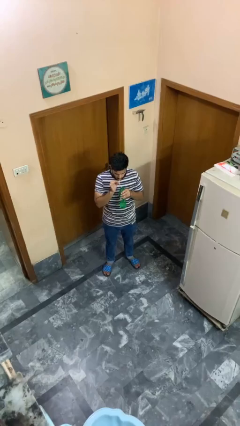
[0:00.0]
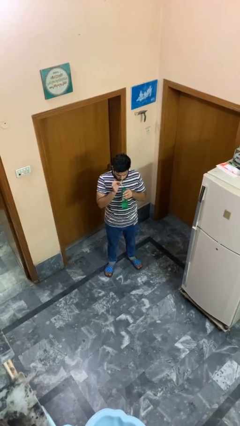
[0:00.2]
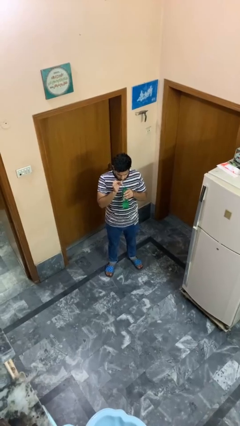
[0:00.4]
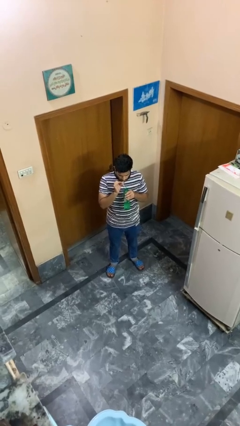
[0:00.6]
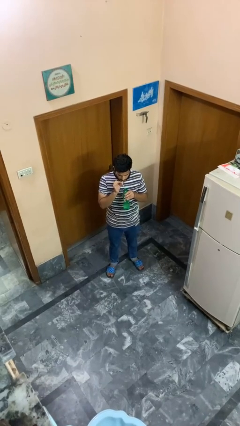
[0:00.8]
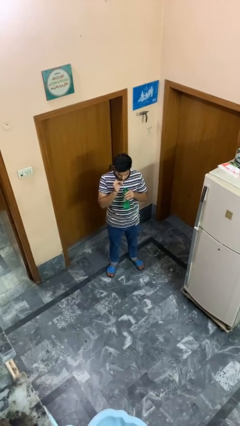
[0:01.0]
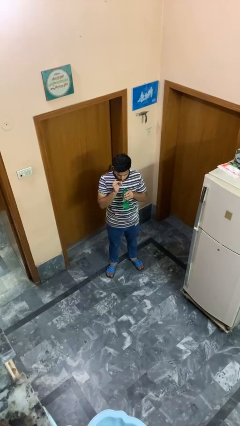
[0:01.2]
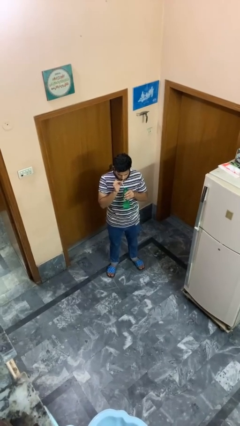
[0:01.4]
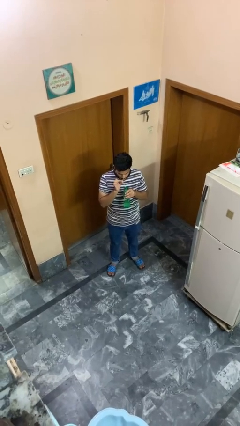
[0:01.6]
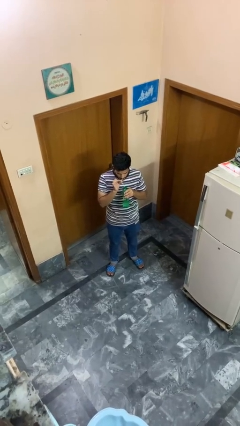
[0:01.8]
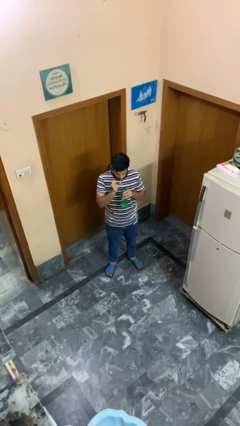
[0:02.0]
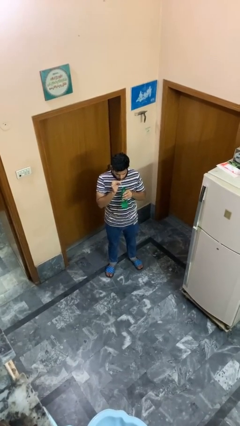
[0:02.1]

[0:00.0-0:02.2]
person drinks from straw

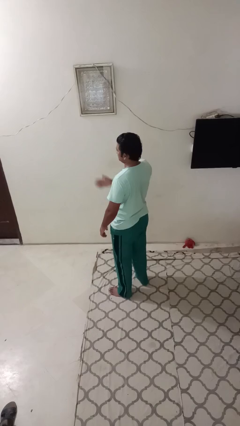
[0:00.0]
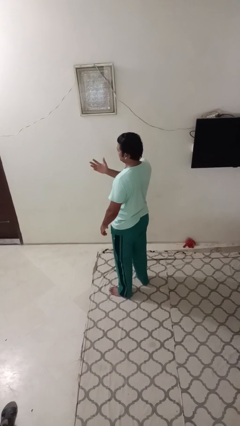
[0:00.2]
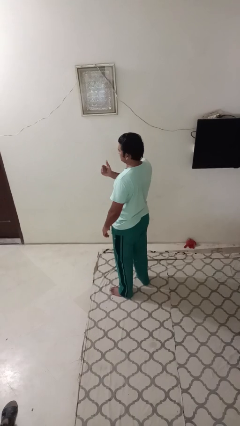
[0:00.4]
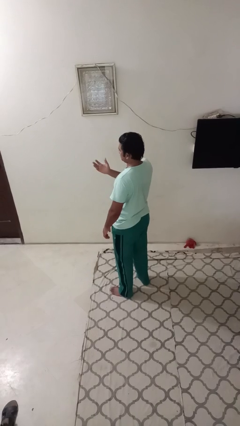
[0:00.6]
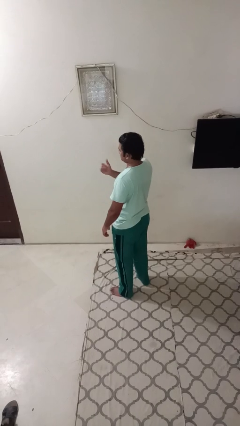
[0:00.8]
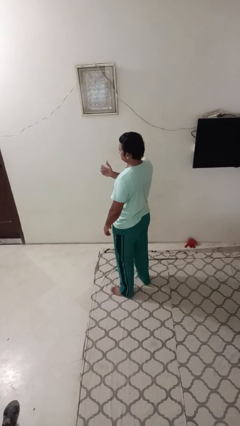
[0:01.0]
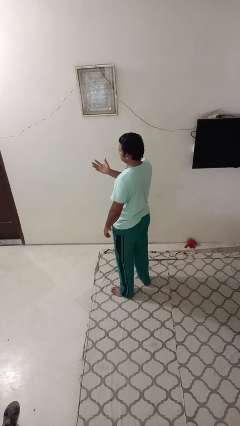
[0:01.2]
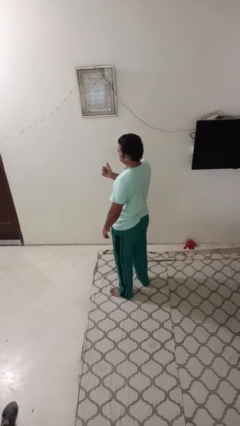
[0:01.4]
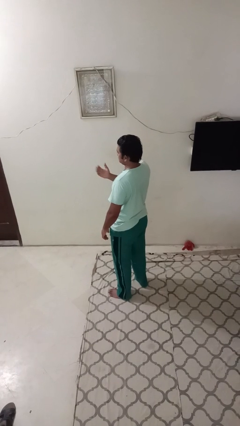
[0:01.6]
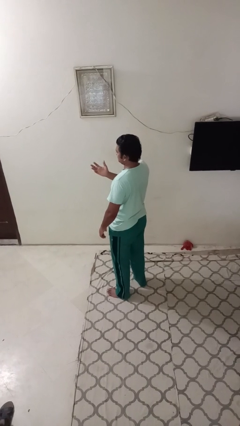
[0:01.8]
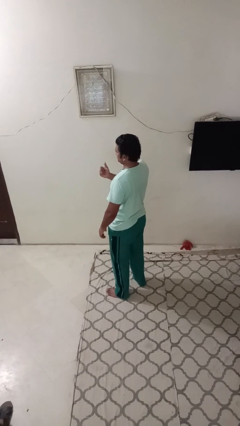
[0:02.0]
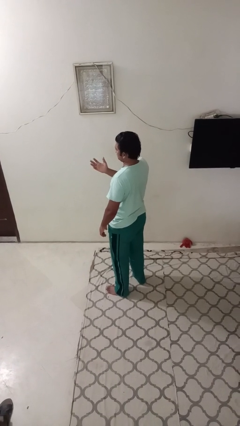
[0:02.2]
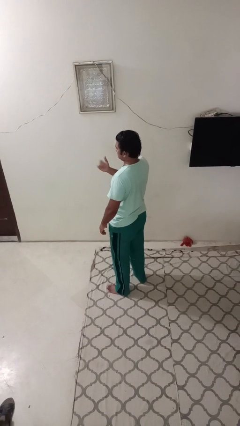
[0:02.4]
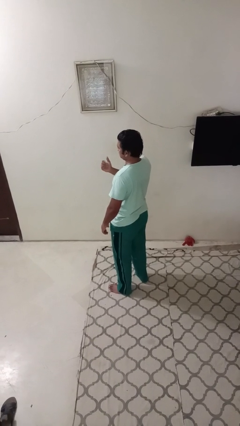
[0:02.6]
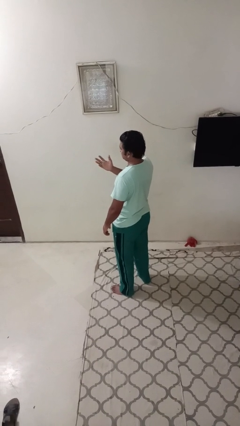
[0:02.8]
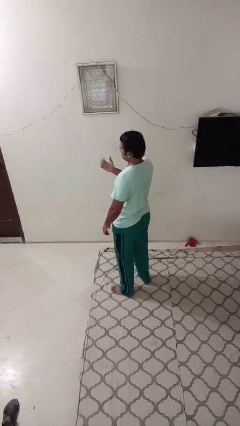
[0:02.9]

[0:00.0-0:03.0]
person gestures come here

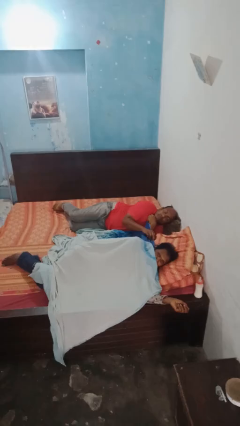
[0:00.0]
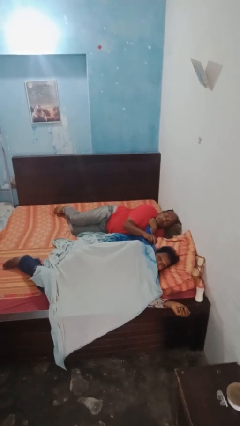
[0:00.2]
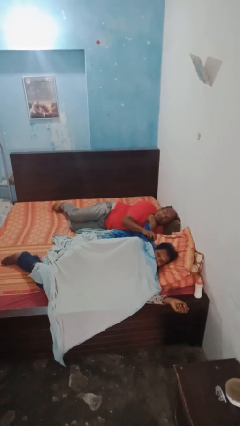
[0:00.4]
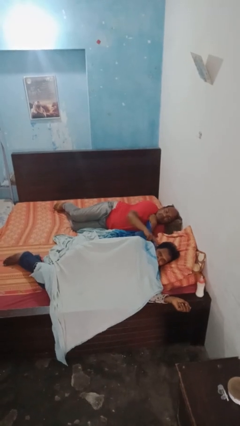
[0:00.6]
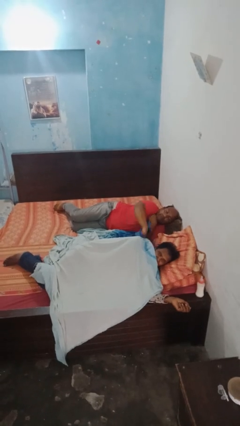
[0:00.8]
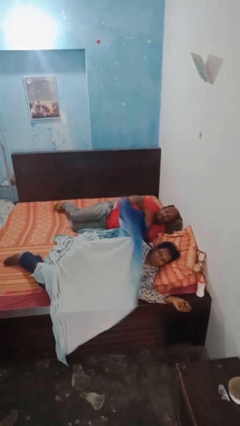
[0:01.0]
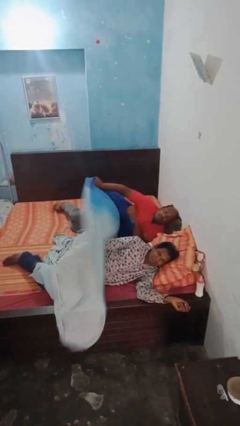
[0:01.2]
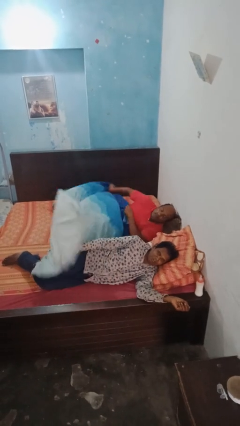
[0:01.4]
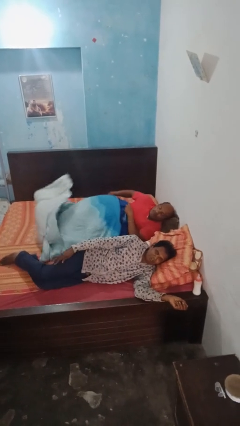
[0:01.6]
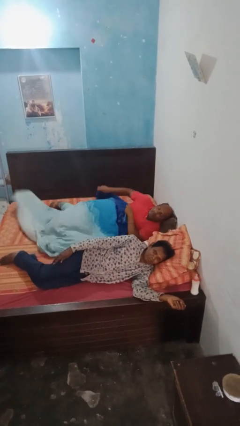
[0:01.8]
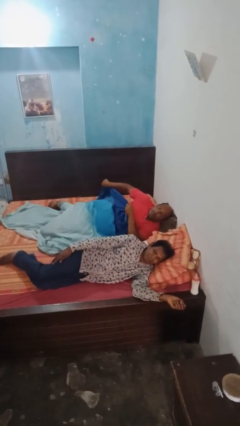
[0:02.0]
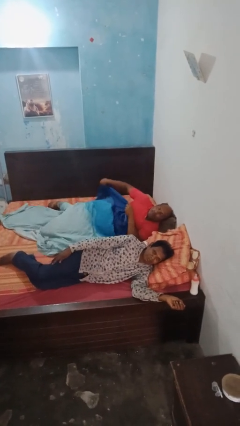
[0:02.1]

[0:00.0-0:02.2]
person uncovers friend with blanket

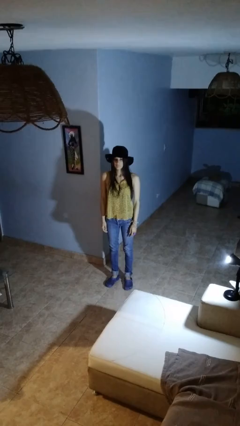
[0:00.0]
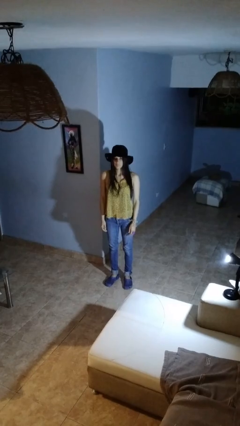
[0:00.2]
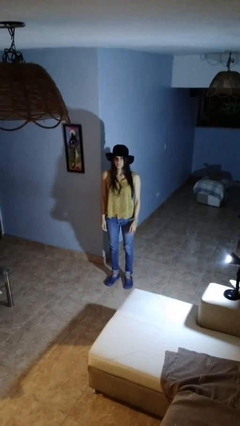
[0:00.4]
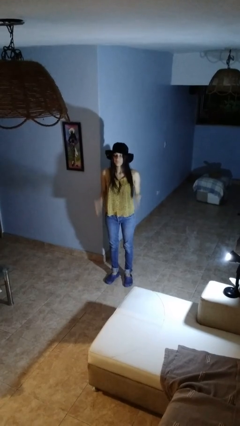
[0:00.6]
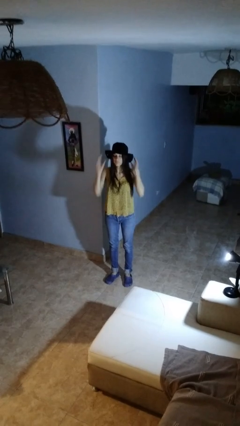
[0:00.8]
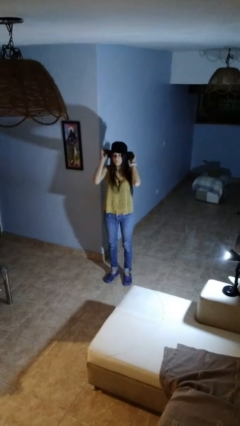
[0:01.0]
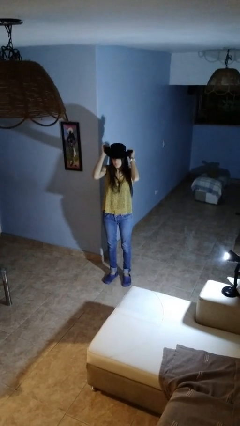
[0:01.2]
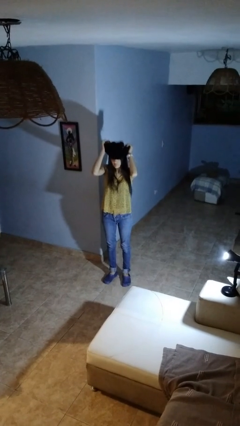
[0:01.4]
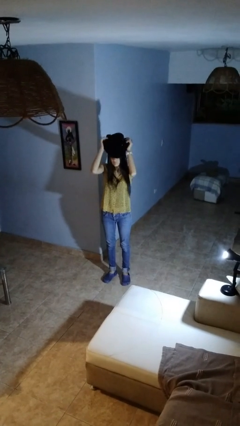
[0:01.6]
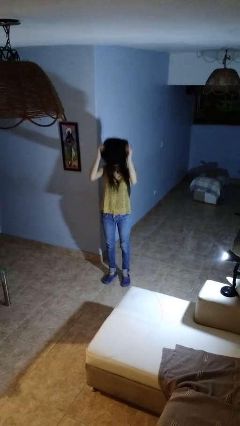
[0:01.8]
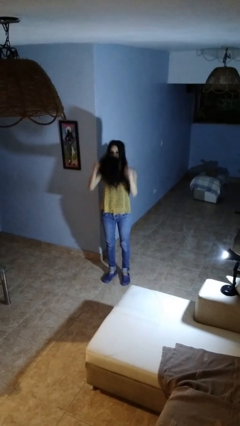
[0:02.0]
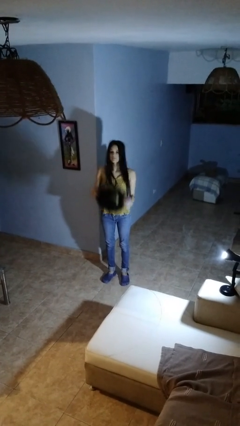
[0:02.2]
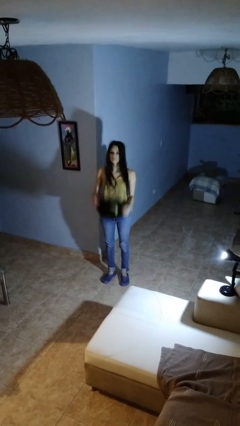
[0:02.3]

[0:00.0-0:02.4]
person takes off hat

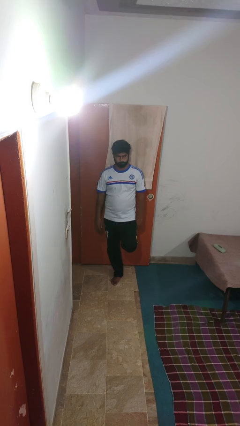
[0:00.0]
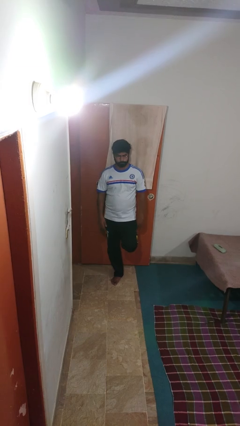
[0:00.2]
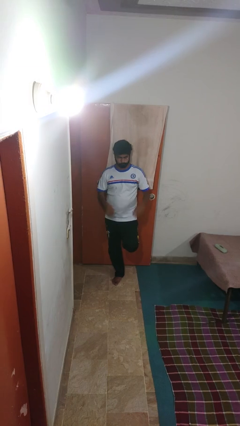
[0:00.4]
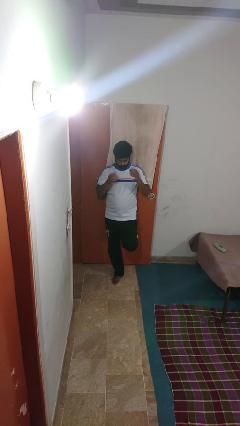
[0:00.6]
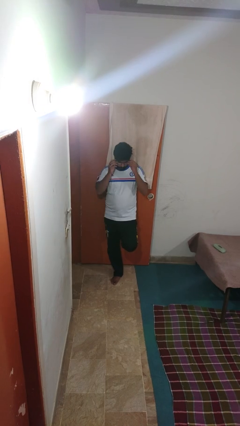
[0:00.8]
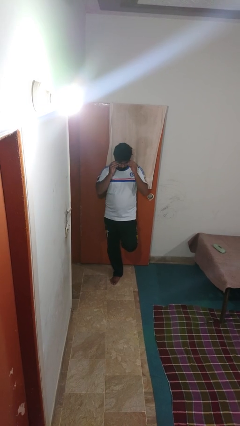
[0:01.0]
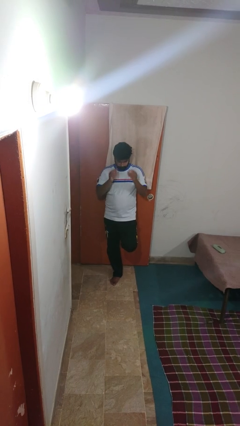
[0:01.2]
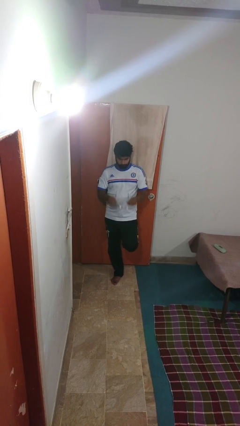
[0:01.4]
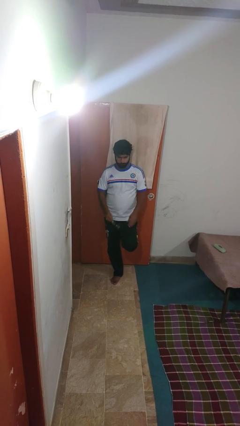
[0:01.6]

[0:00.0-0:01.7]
person takes off glasses

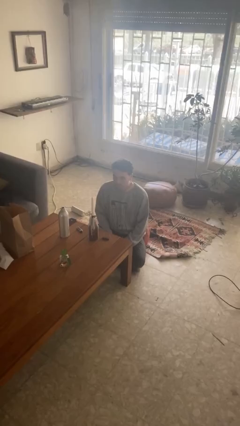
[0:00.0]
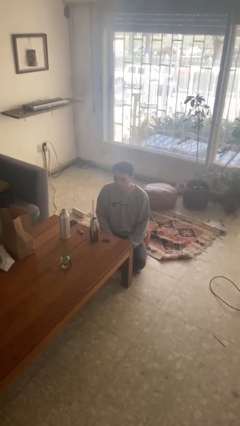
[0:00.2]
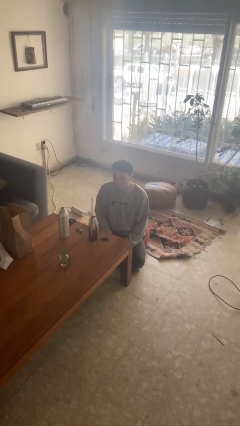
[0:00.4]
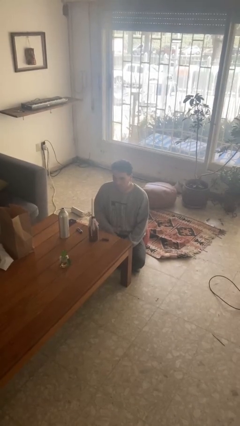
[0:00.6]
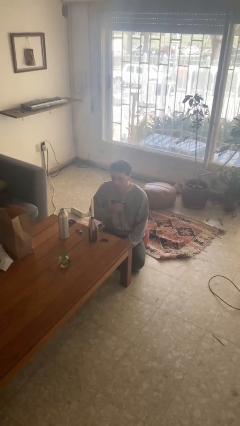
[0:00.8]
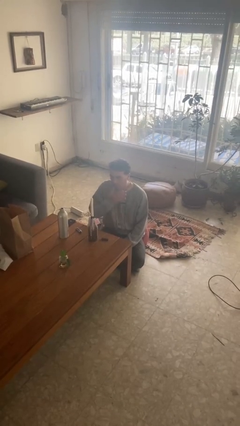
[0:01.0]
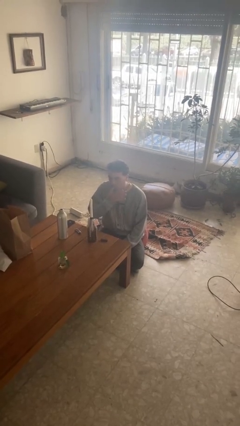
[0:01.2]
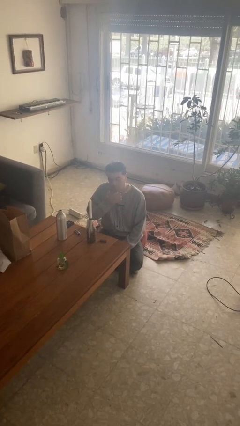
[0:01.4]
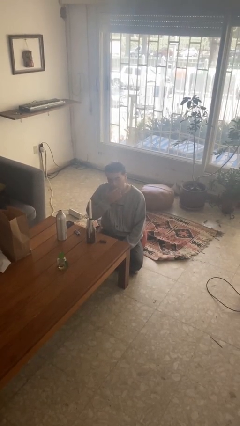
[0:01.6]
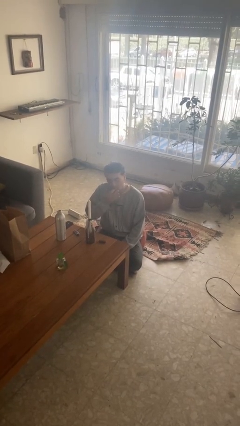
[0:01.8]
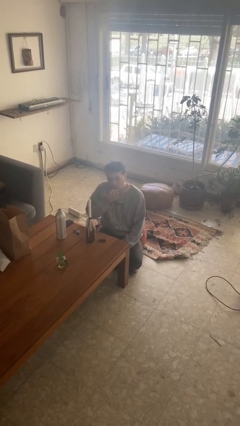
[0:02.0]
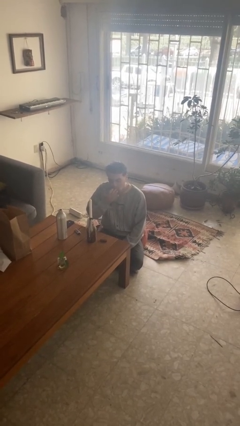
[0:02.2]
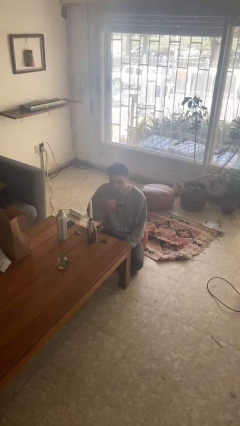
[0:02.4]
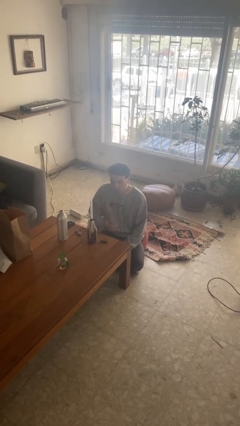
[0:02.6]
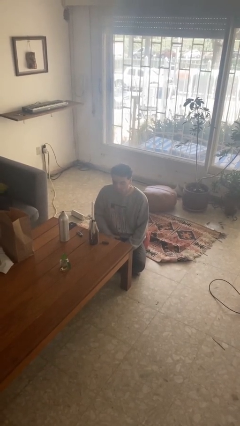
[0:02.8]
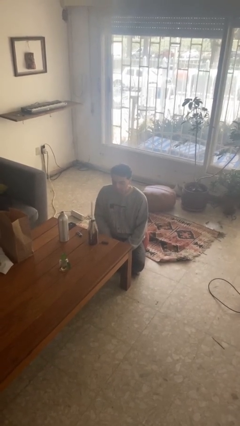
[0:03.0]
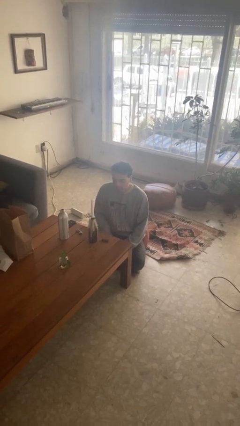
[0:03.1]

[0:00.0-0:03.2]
person licks fingers

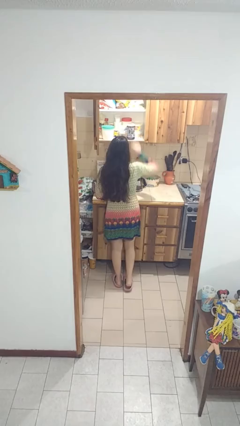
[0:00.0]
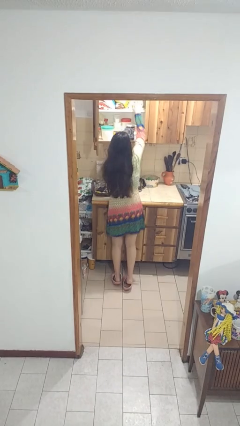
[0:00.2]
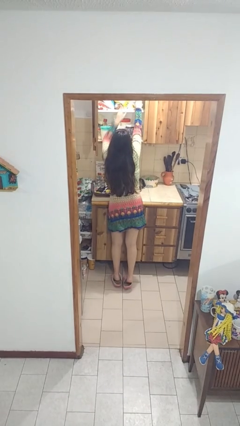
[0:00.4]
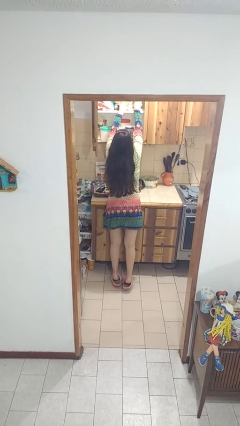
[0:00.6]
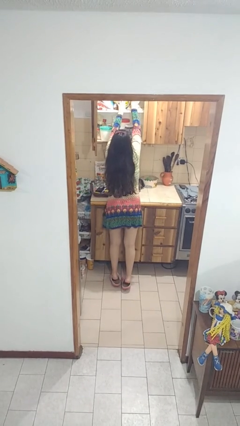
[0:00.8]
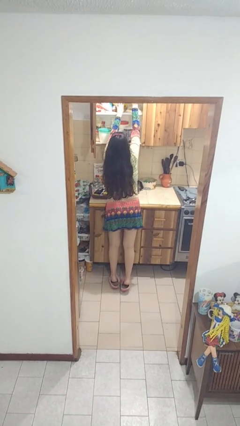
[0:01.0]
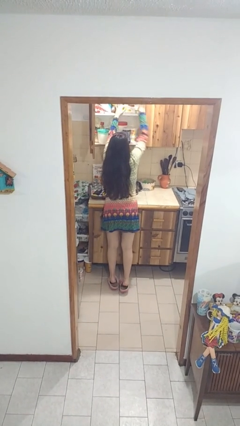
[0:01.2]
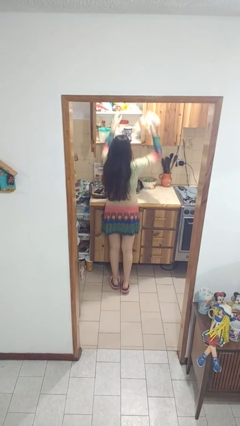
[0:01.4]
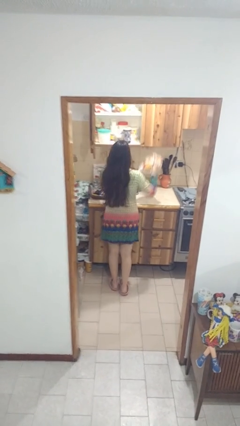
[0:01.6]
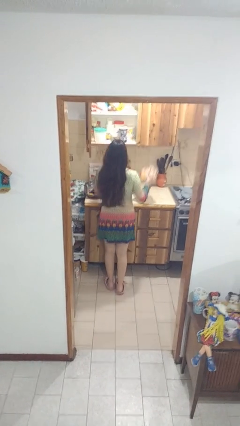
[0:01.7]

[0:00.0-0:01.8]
person takes object from cabinet

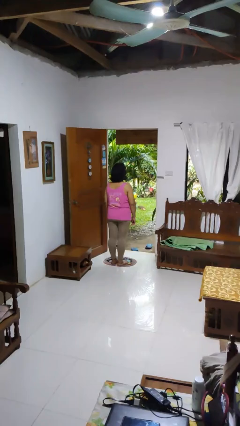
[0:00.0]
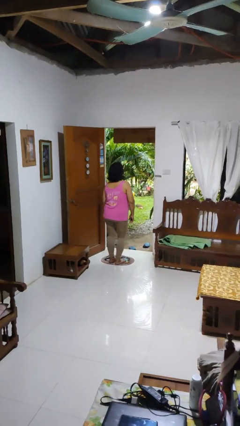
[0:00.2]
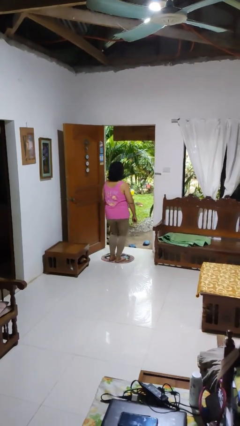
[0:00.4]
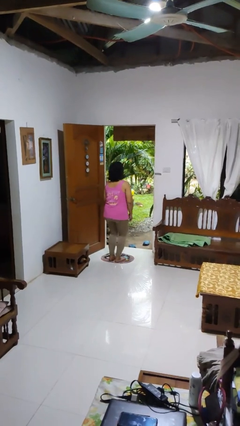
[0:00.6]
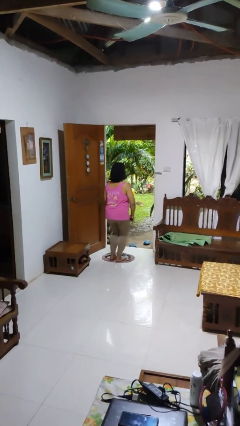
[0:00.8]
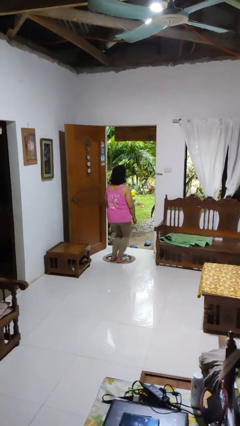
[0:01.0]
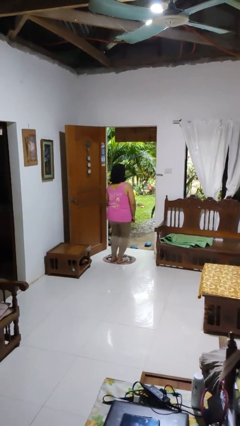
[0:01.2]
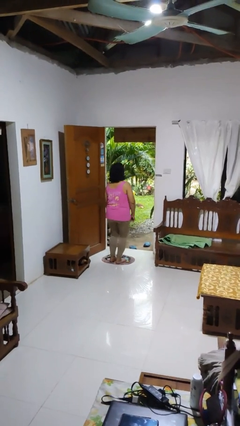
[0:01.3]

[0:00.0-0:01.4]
person wiggles hips
